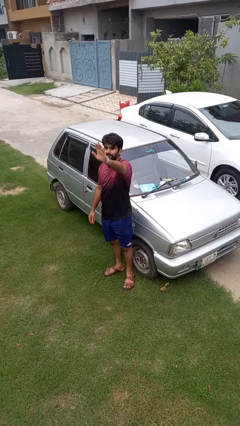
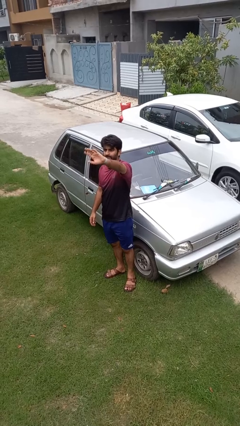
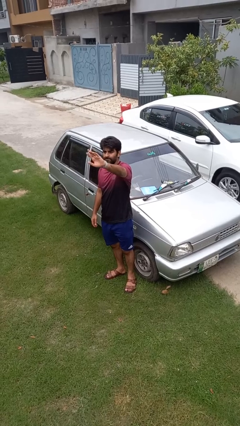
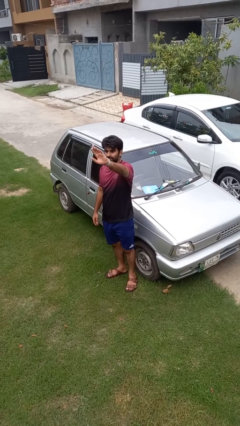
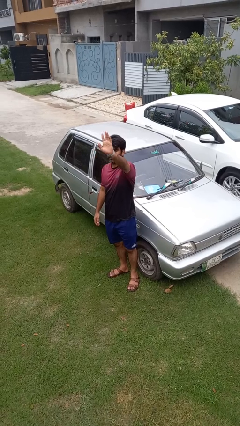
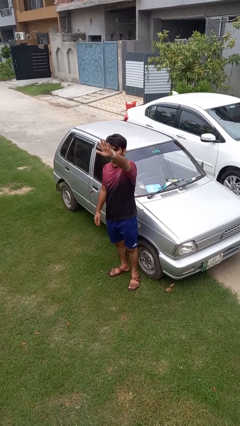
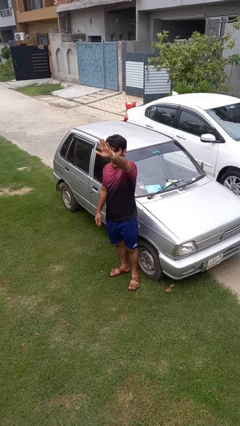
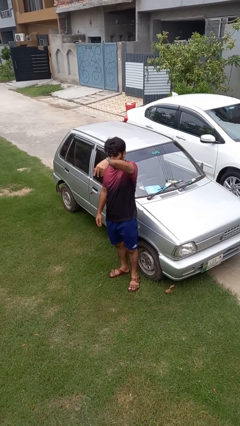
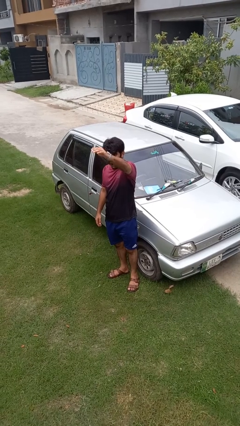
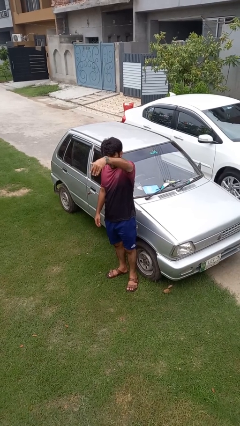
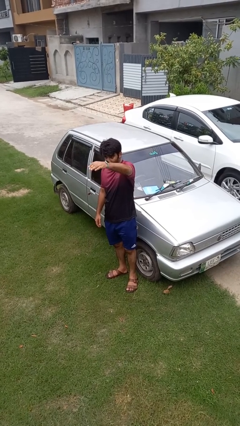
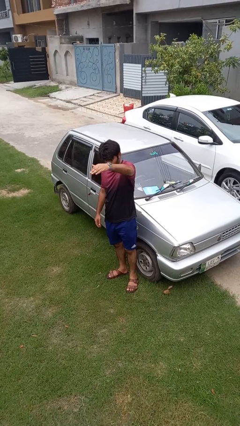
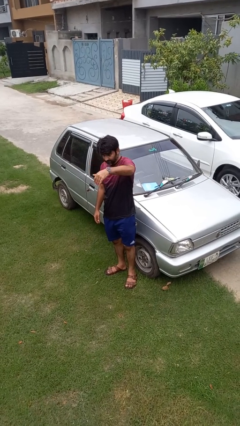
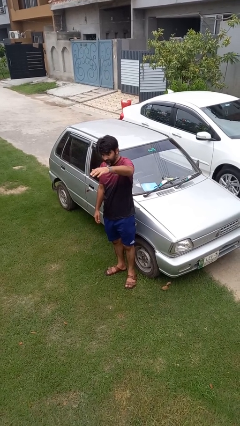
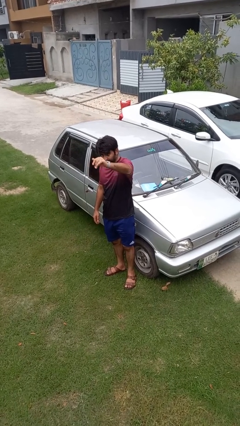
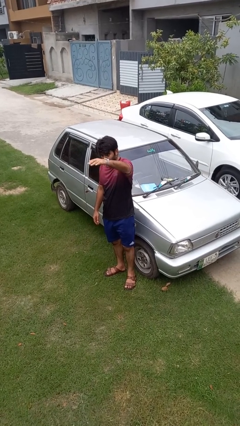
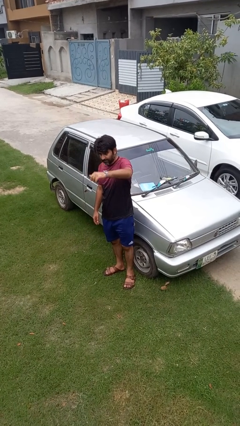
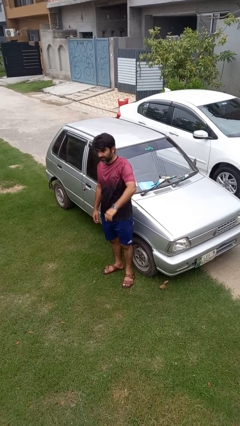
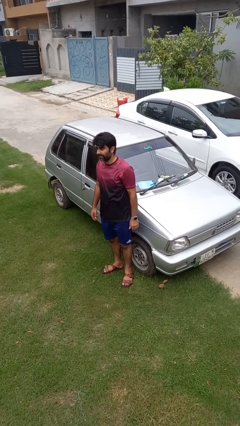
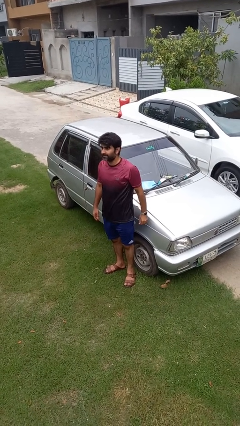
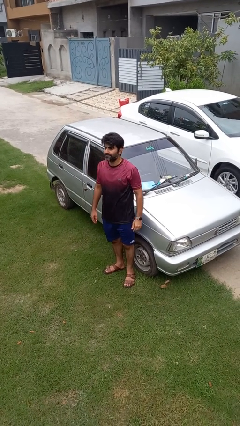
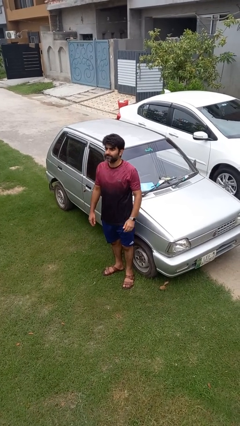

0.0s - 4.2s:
person gestures come here

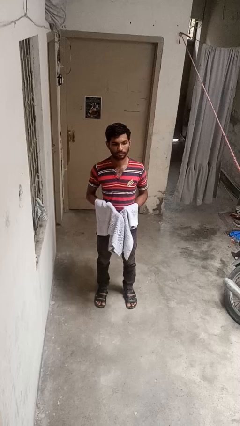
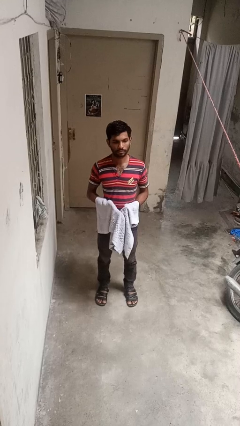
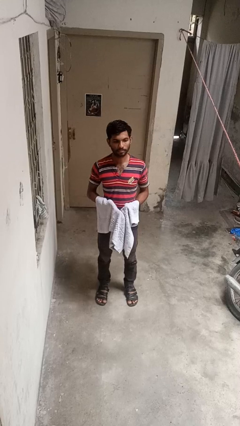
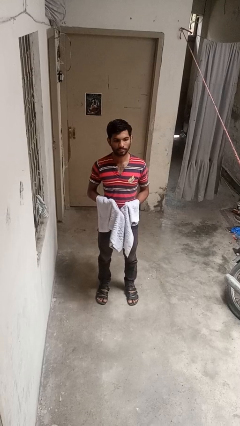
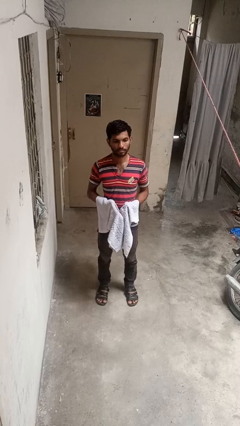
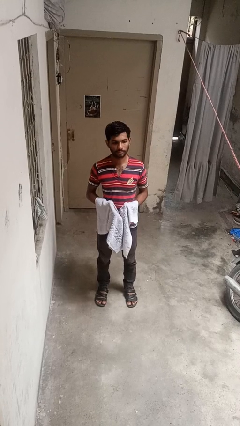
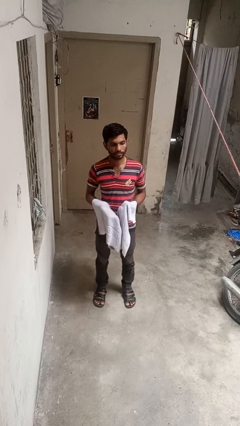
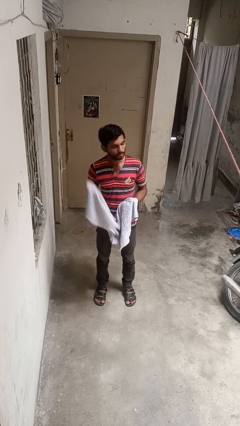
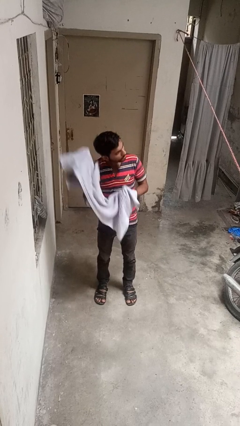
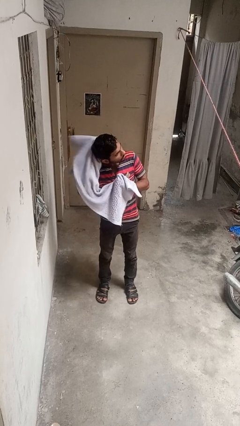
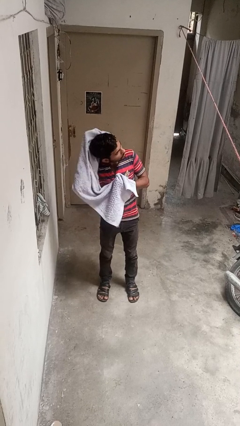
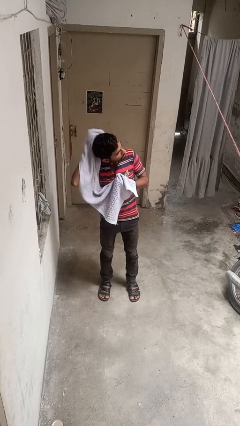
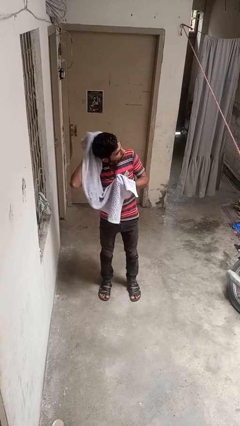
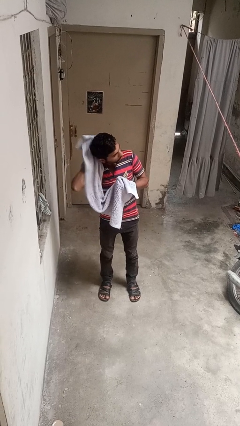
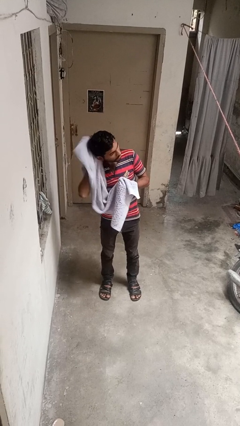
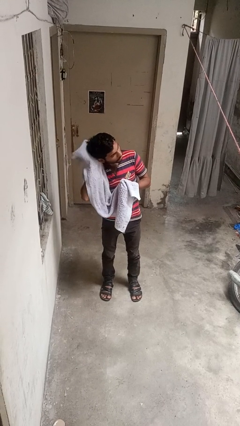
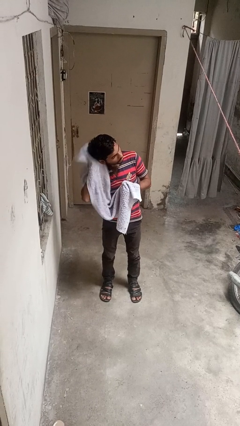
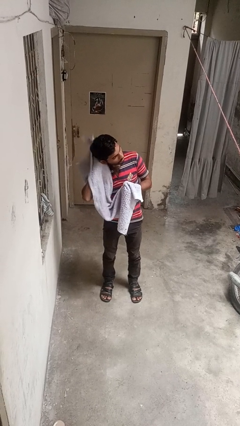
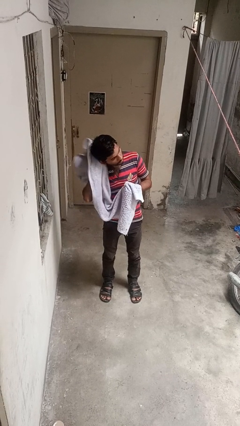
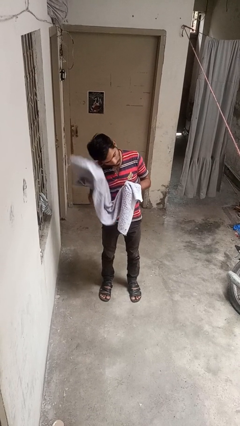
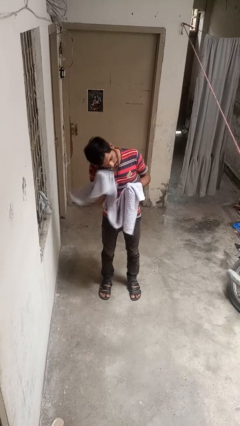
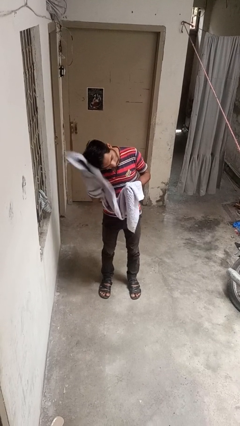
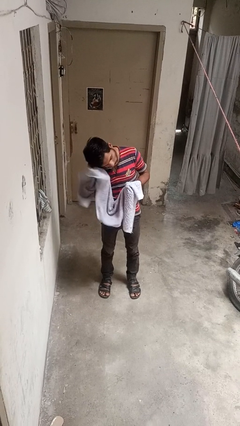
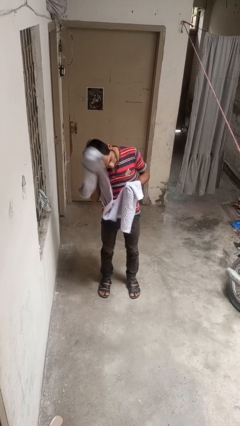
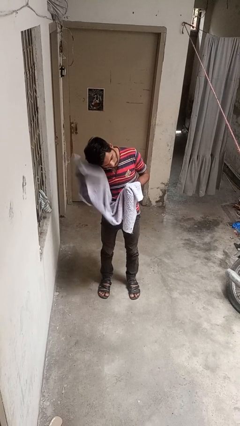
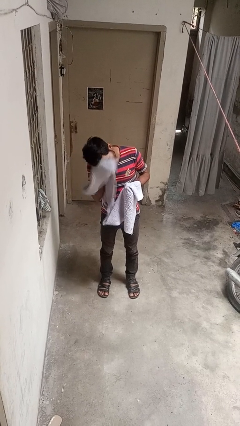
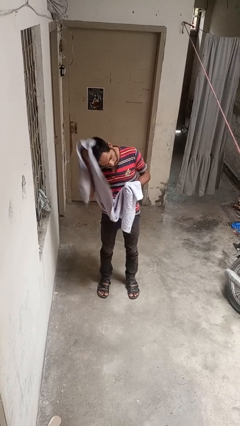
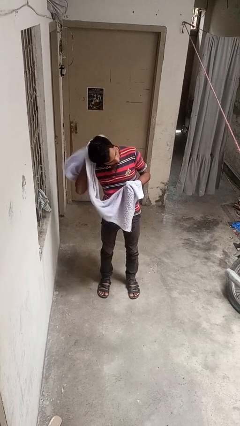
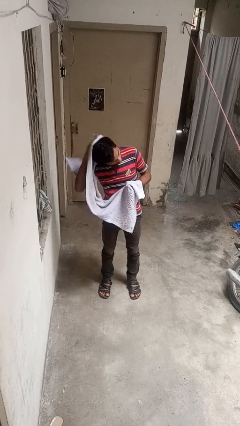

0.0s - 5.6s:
person dries hair with towel

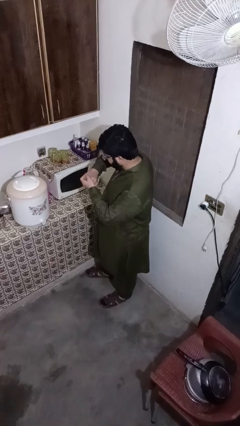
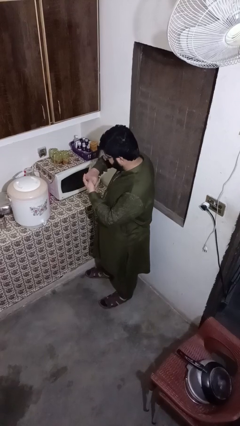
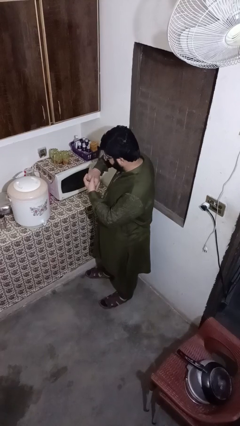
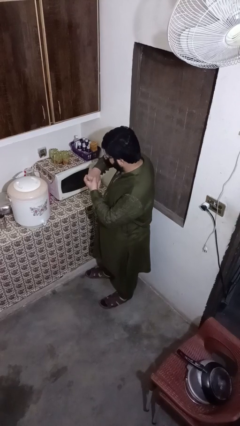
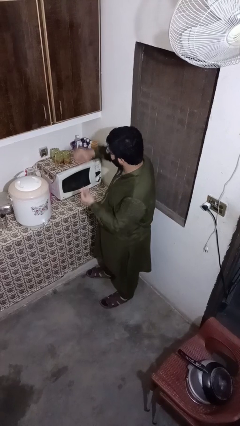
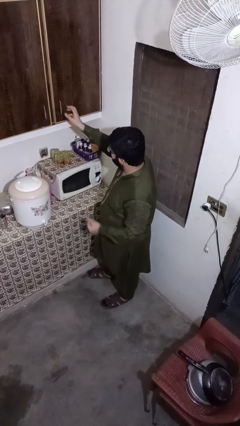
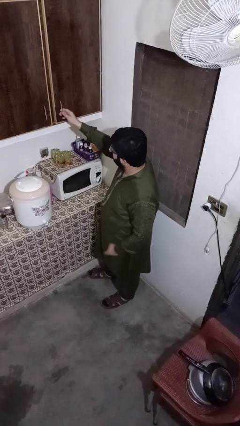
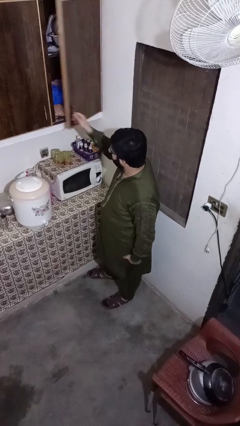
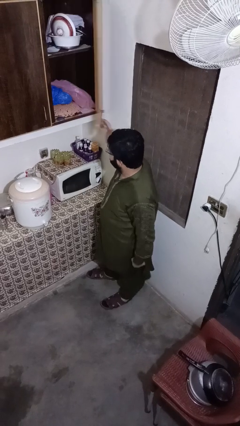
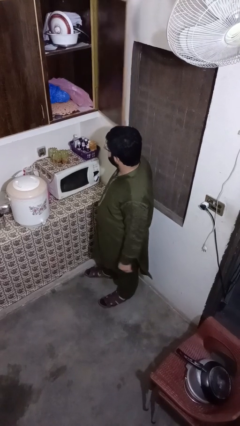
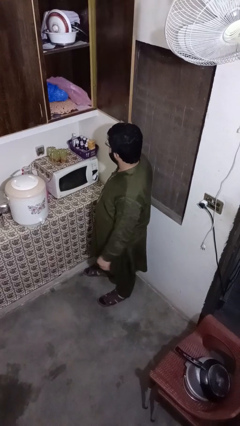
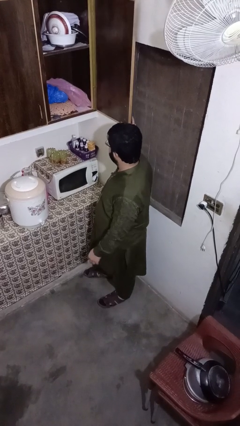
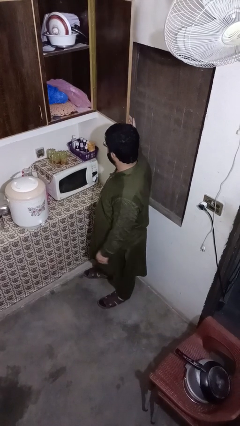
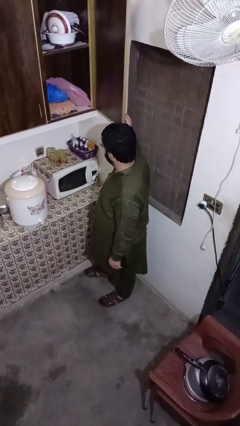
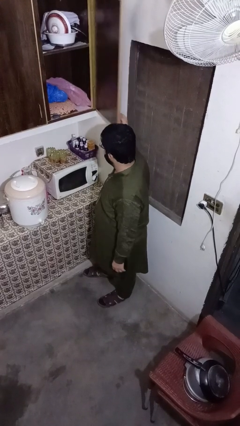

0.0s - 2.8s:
person opens kitchen drawer

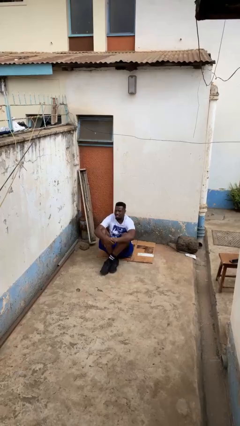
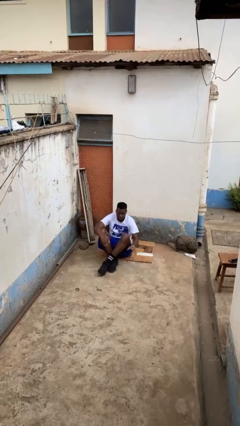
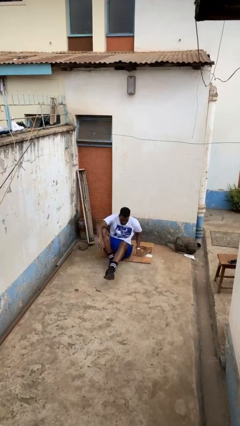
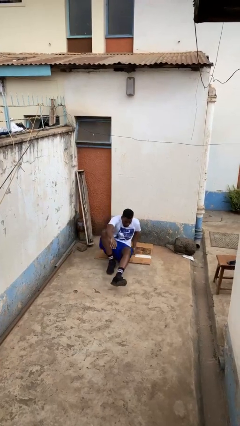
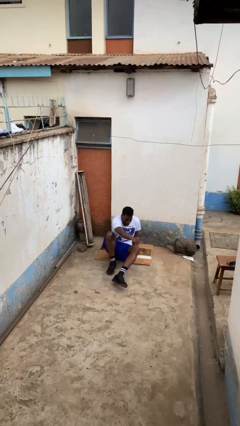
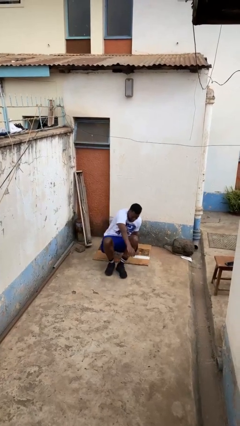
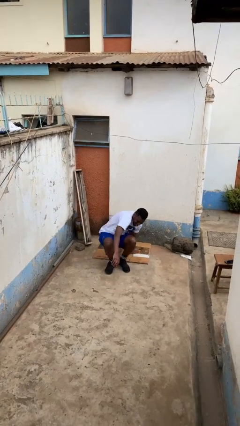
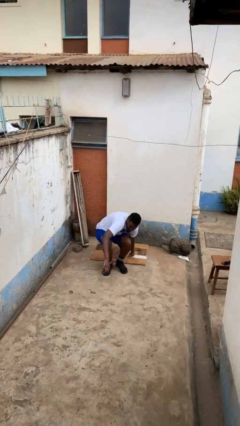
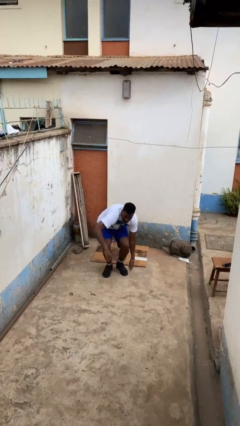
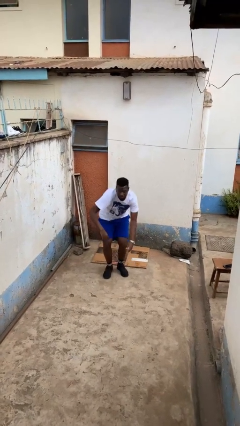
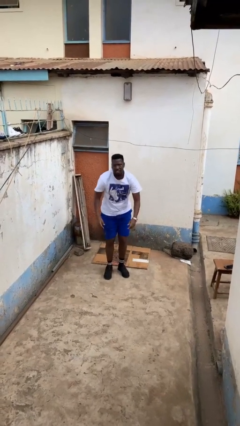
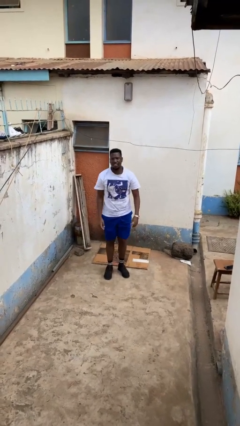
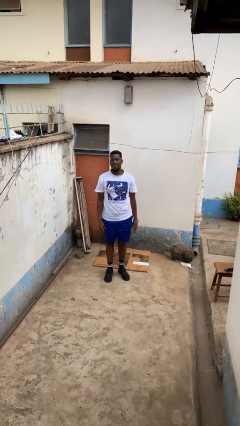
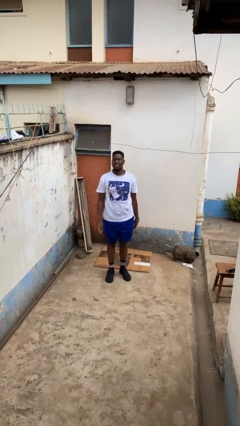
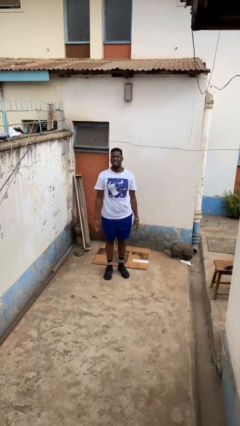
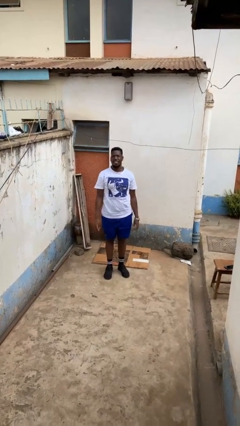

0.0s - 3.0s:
person stands up from floor

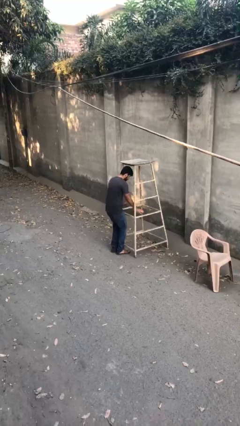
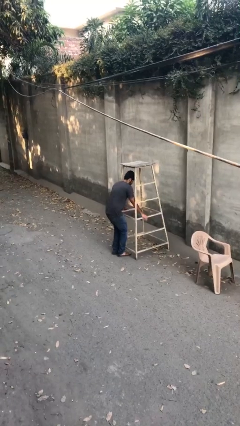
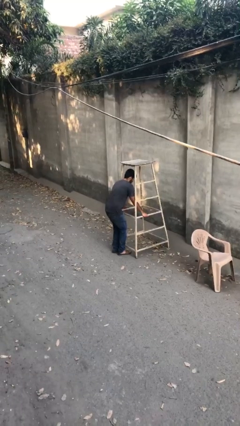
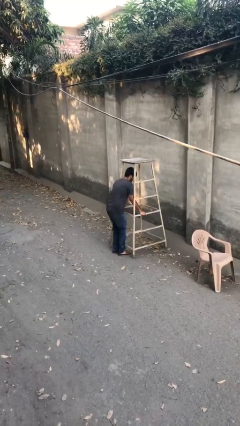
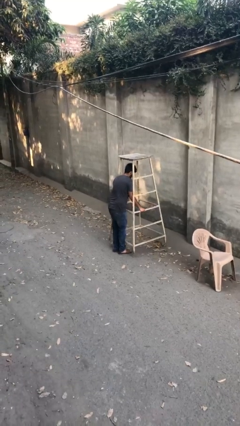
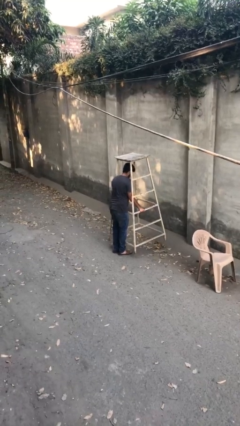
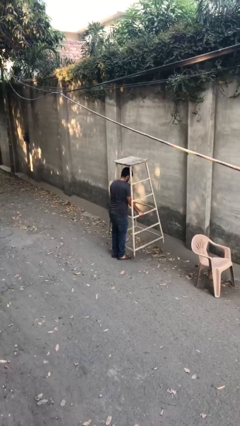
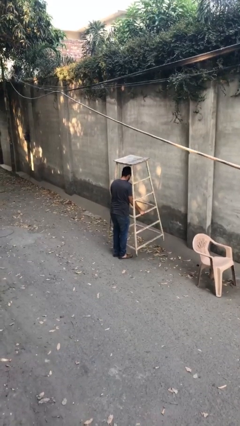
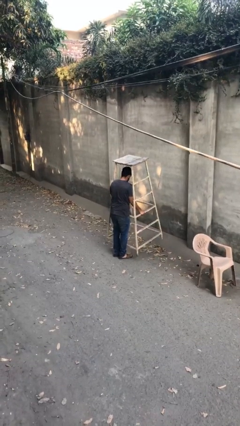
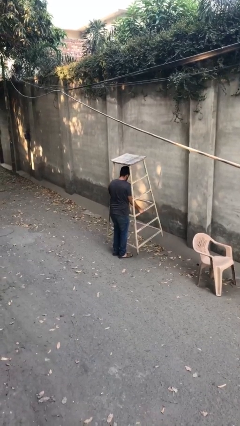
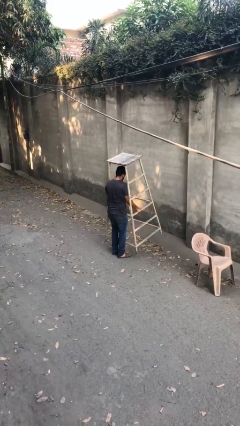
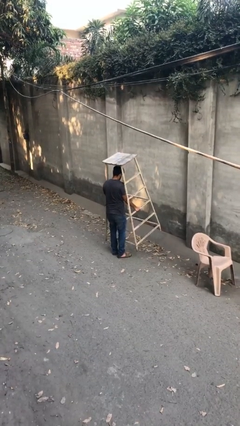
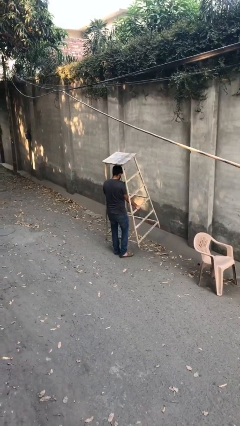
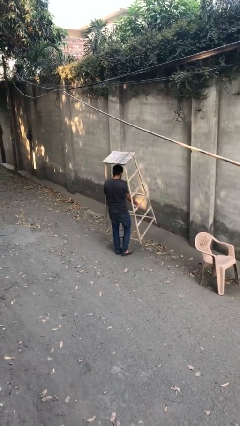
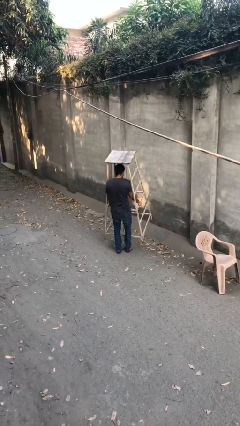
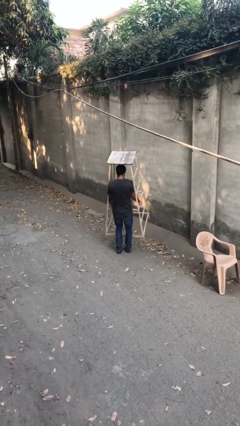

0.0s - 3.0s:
person picks up object from floor
